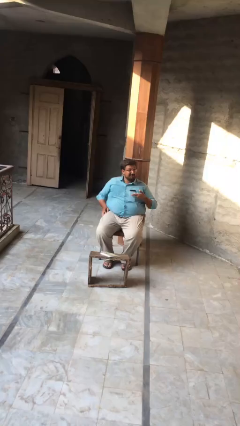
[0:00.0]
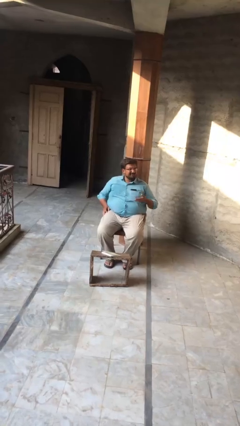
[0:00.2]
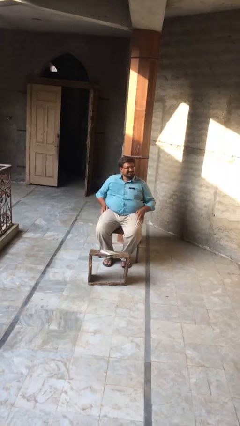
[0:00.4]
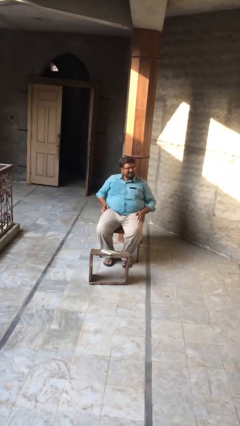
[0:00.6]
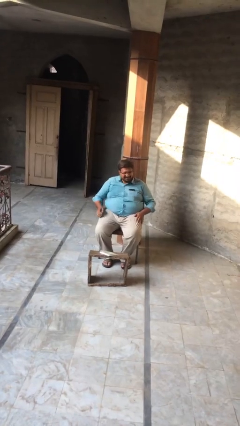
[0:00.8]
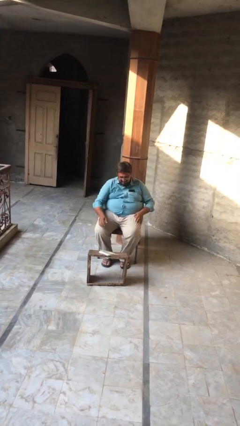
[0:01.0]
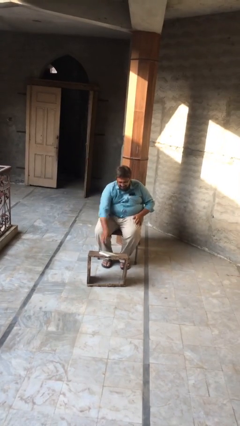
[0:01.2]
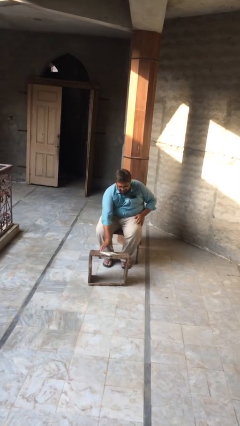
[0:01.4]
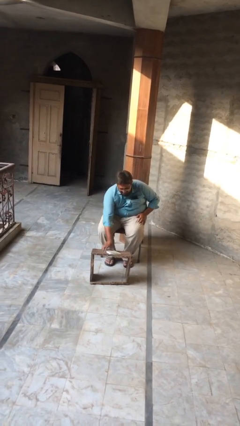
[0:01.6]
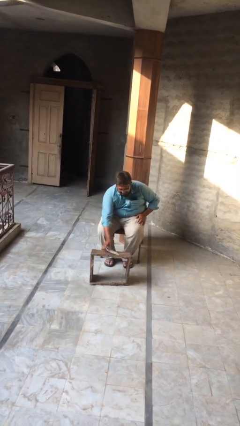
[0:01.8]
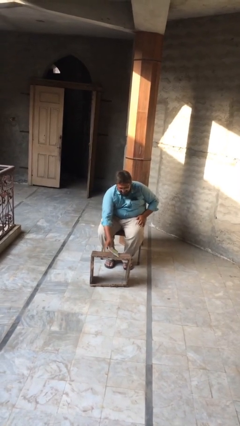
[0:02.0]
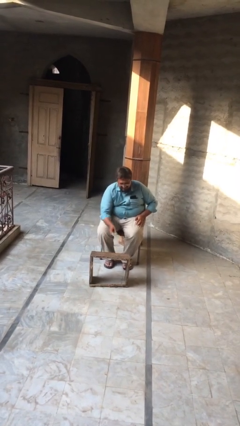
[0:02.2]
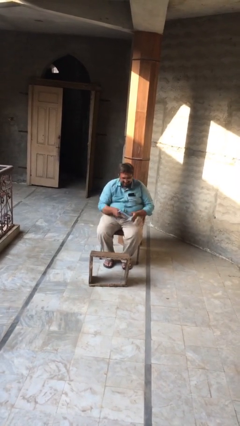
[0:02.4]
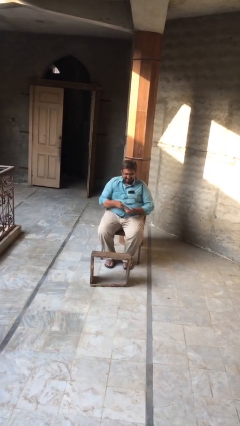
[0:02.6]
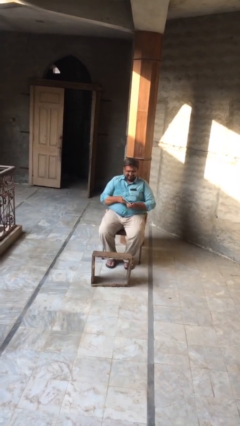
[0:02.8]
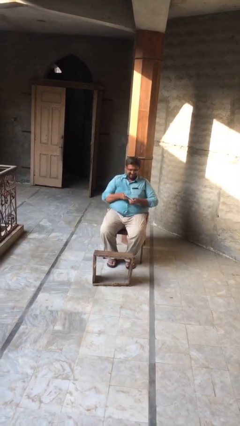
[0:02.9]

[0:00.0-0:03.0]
person picks up object from table

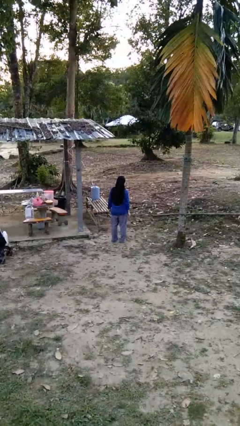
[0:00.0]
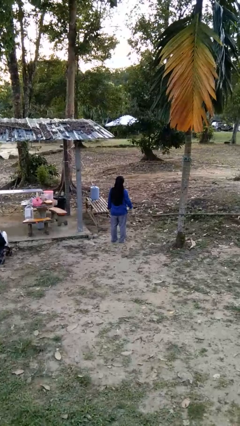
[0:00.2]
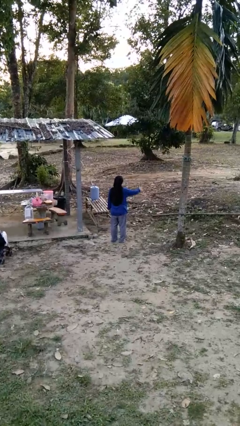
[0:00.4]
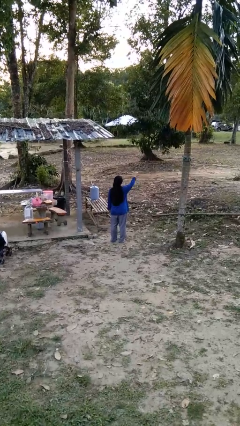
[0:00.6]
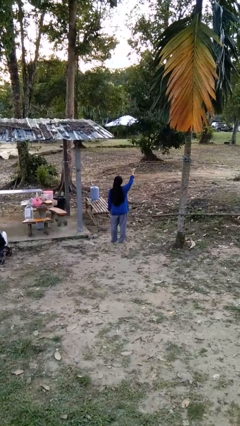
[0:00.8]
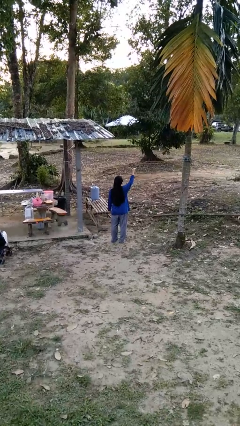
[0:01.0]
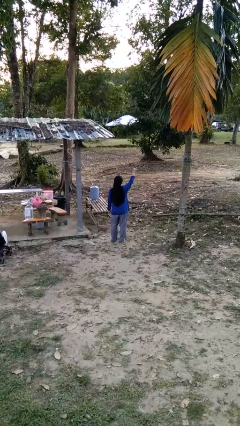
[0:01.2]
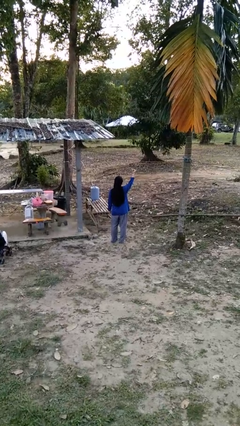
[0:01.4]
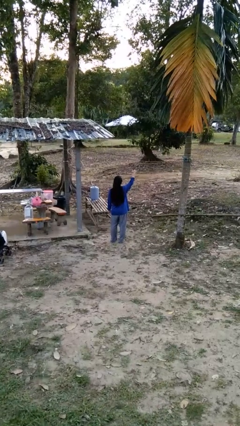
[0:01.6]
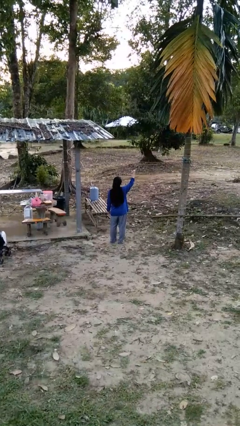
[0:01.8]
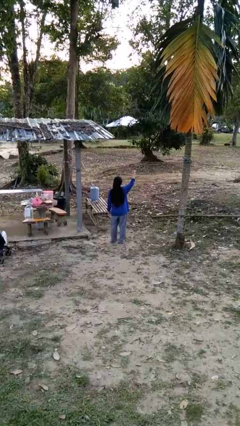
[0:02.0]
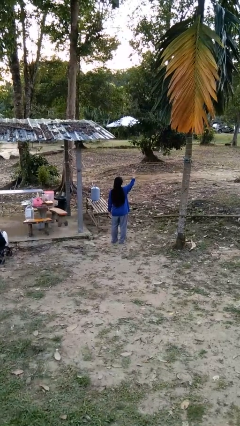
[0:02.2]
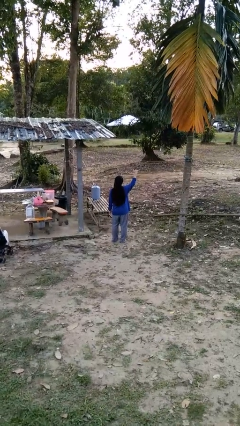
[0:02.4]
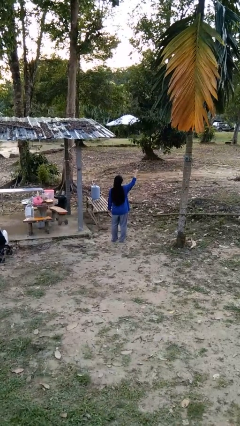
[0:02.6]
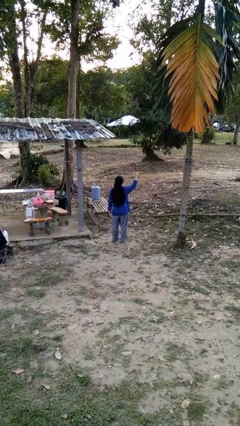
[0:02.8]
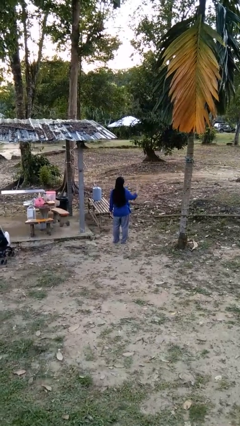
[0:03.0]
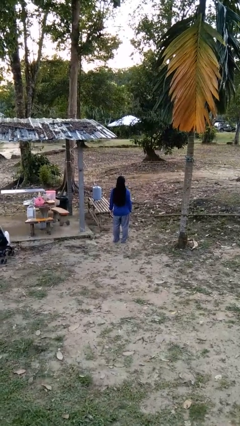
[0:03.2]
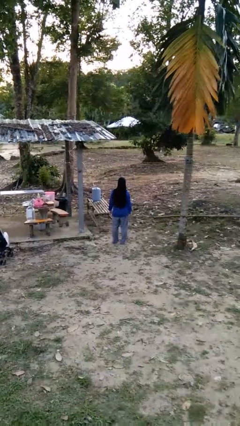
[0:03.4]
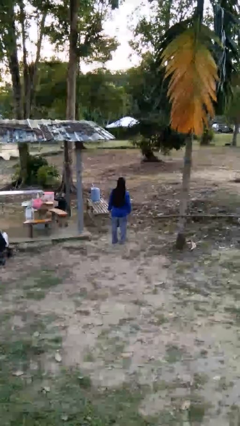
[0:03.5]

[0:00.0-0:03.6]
person gestures hang loose

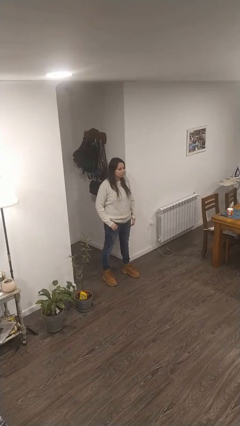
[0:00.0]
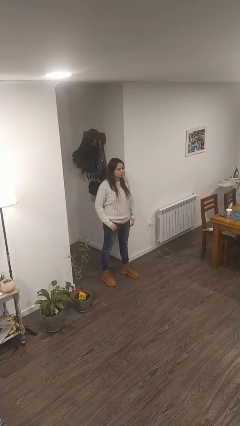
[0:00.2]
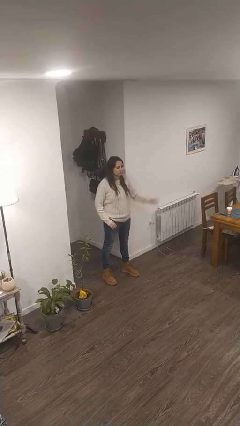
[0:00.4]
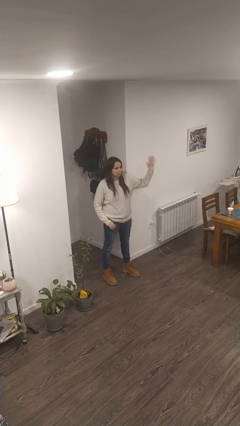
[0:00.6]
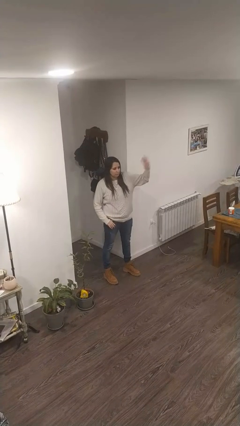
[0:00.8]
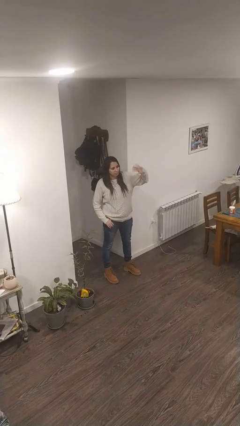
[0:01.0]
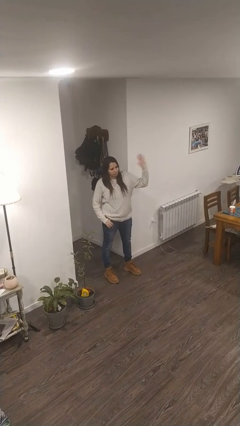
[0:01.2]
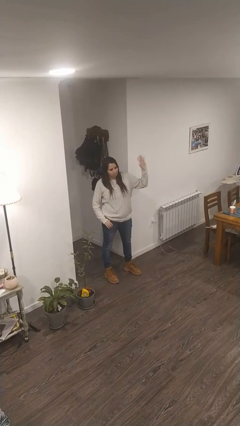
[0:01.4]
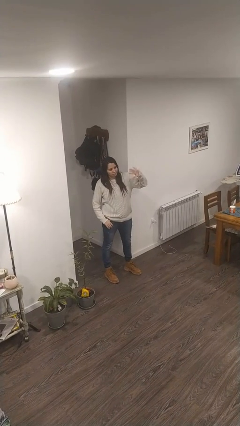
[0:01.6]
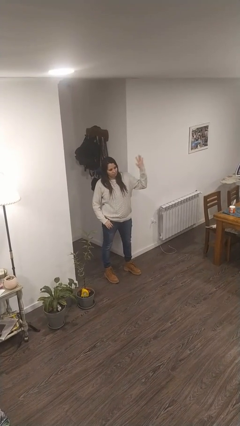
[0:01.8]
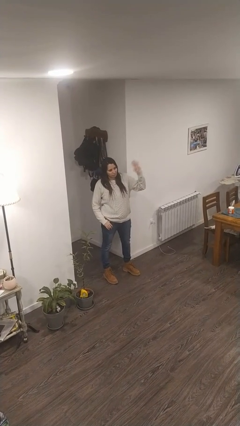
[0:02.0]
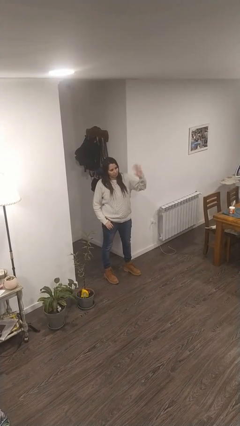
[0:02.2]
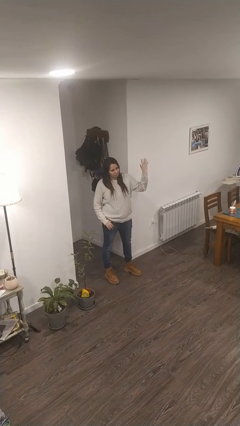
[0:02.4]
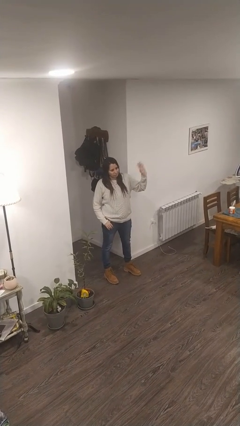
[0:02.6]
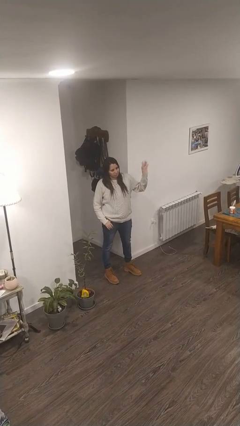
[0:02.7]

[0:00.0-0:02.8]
person waves at person

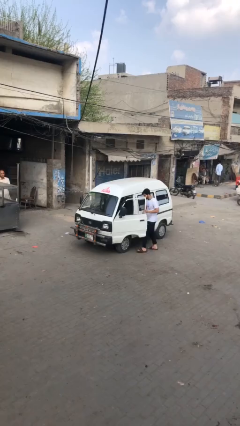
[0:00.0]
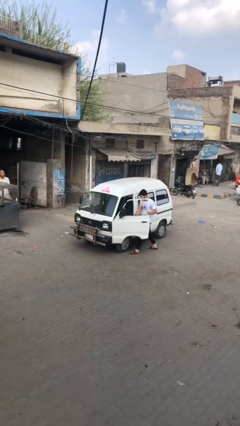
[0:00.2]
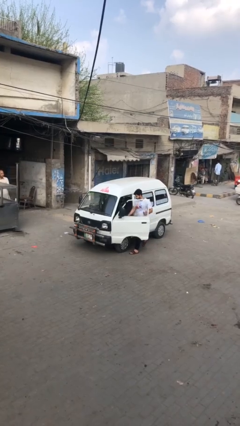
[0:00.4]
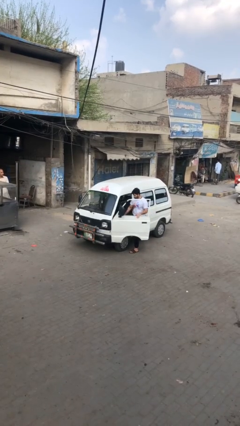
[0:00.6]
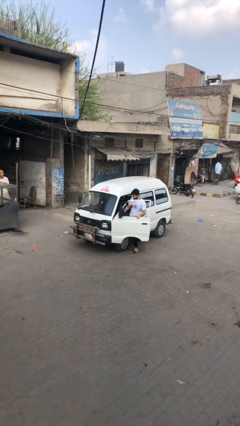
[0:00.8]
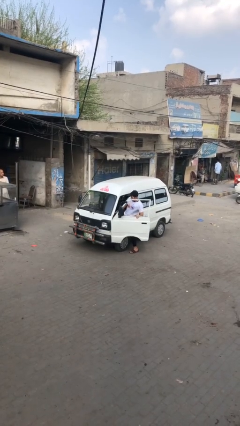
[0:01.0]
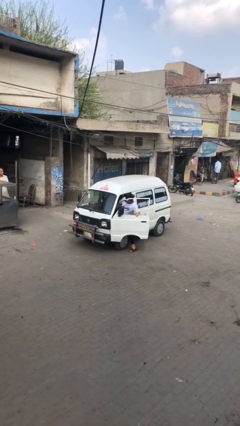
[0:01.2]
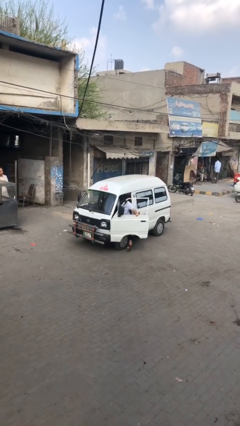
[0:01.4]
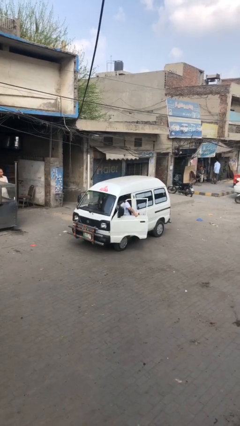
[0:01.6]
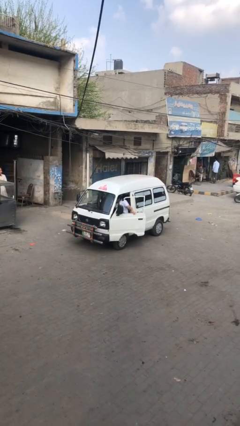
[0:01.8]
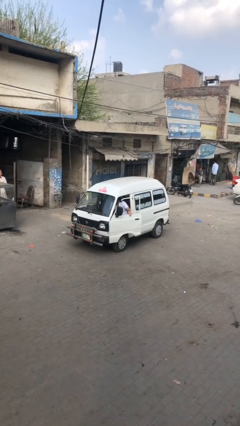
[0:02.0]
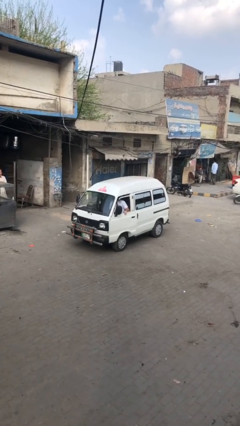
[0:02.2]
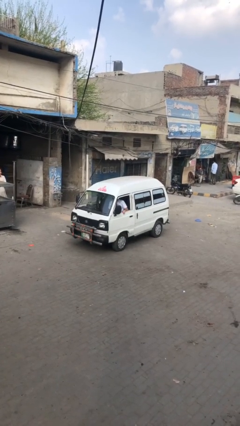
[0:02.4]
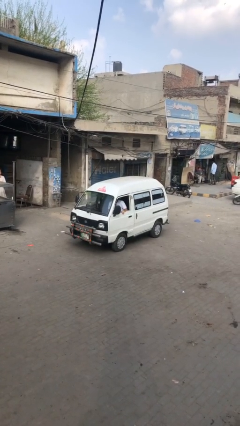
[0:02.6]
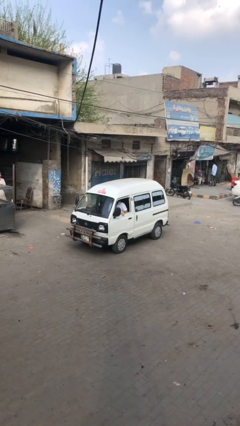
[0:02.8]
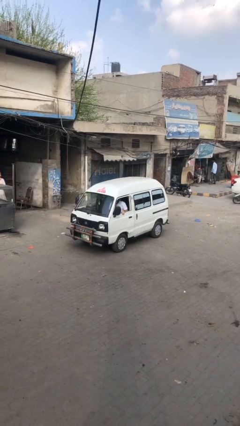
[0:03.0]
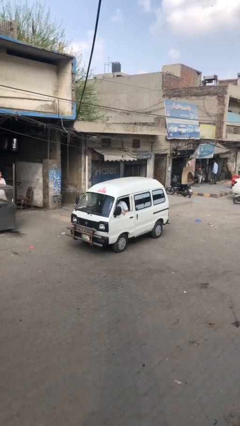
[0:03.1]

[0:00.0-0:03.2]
car picks up person

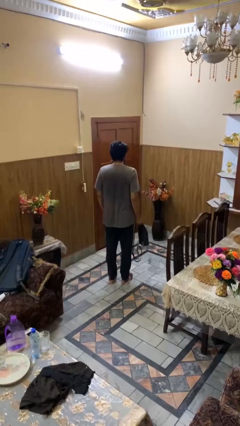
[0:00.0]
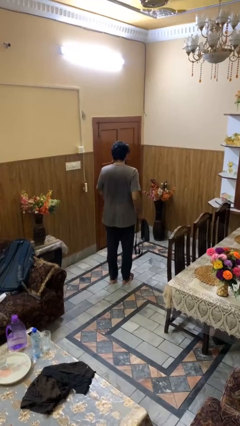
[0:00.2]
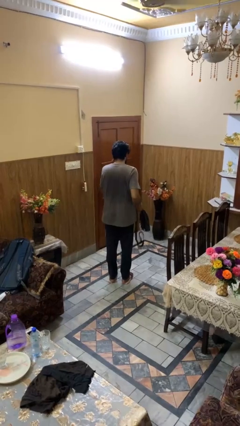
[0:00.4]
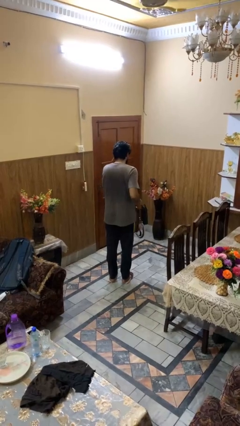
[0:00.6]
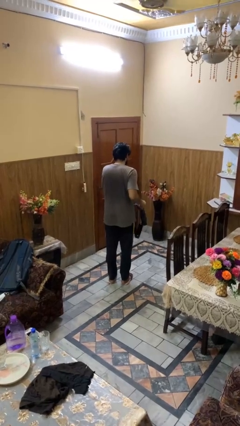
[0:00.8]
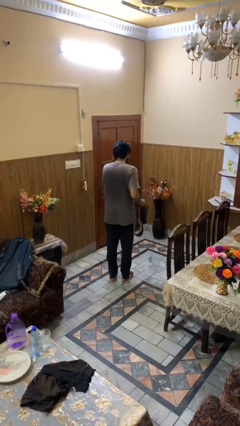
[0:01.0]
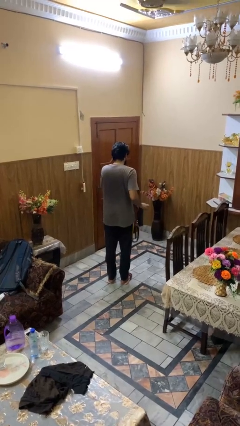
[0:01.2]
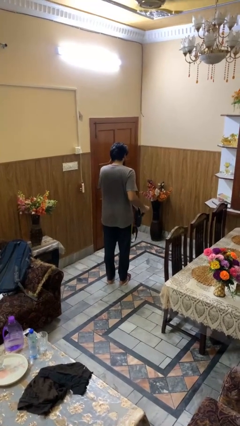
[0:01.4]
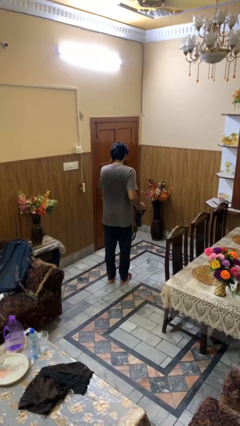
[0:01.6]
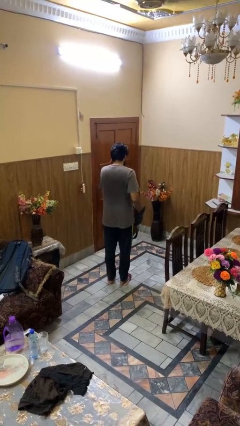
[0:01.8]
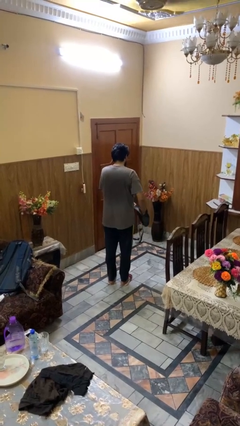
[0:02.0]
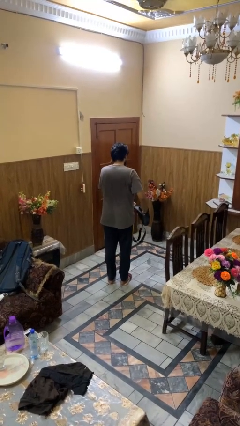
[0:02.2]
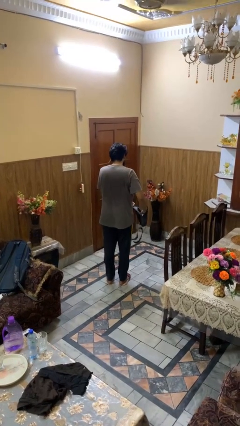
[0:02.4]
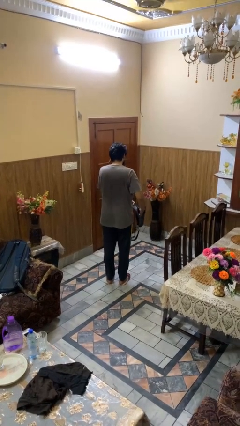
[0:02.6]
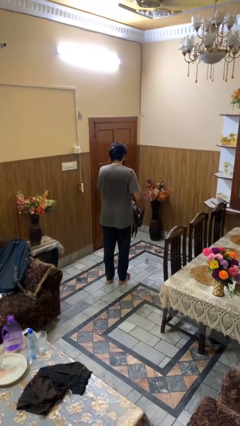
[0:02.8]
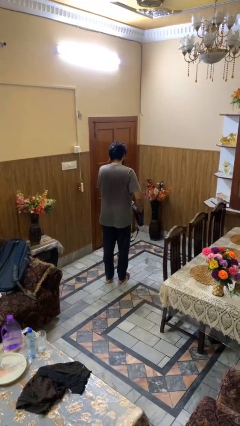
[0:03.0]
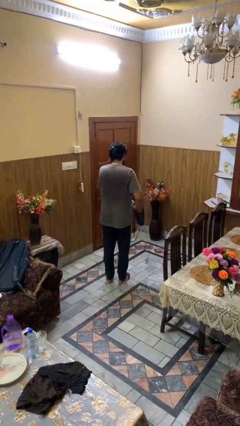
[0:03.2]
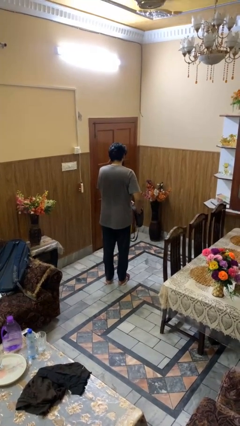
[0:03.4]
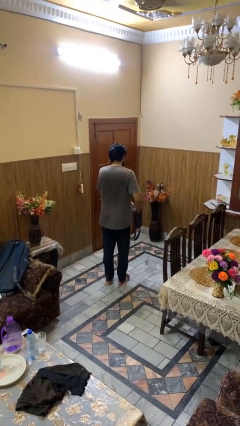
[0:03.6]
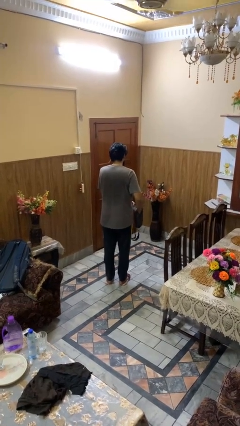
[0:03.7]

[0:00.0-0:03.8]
person searches in purse

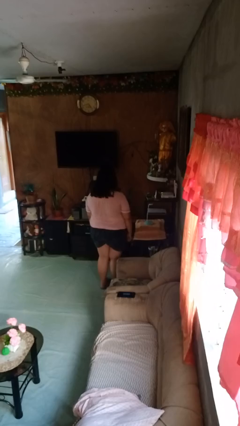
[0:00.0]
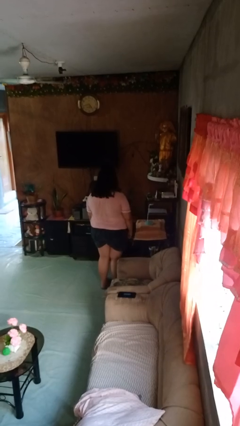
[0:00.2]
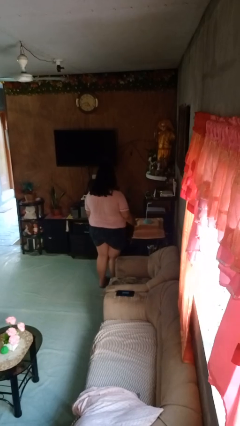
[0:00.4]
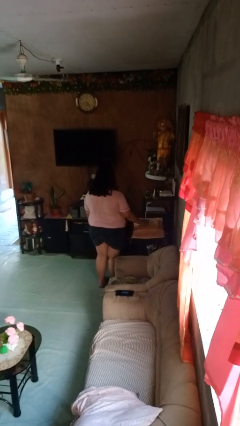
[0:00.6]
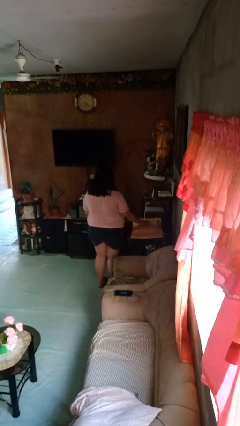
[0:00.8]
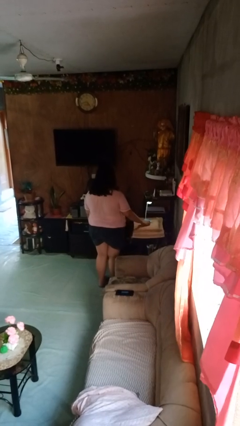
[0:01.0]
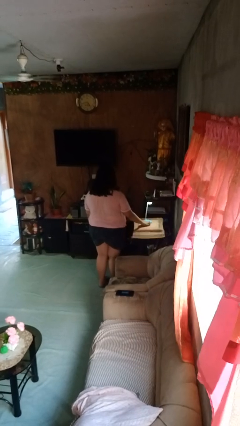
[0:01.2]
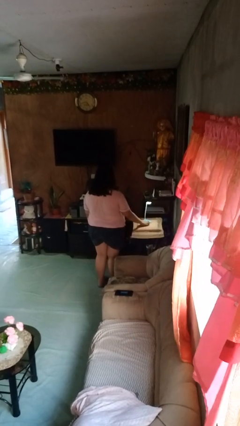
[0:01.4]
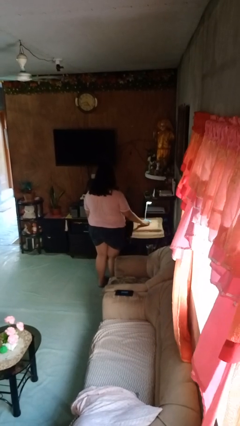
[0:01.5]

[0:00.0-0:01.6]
person turns on lamp
